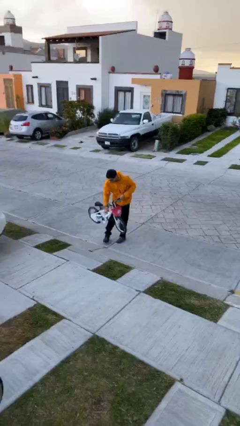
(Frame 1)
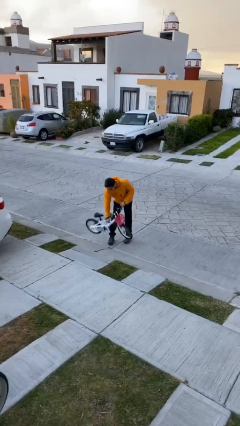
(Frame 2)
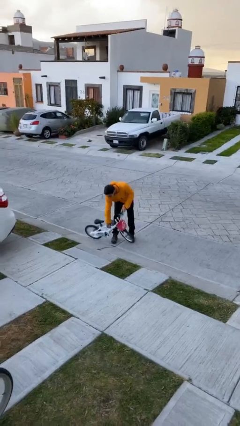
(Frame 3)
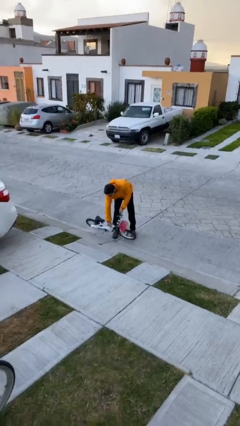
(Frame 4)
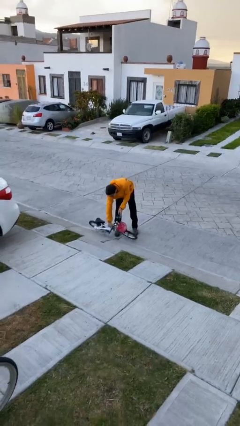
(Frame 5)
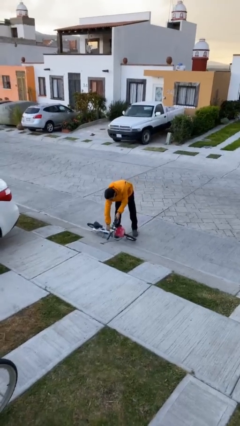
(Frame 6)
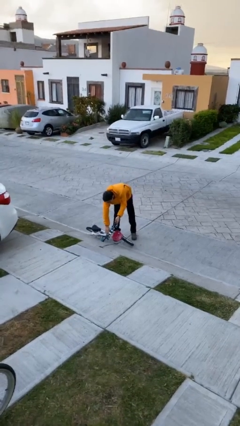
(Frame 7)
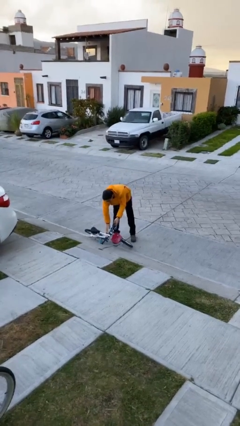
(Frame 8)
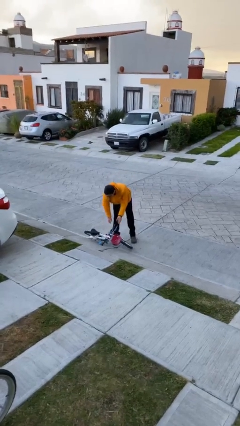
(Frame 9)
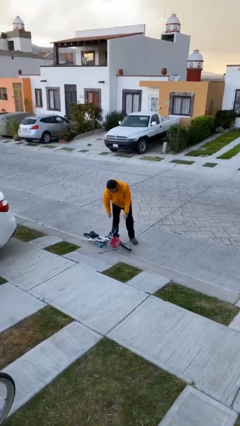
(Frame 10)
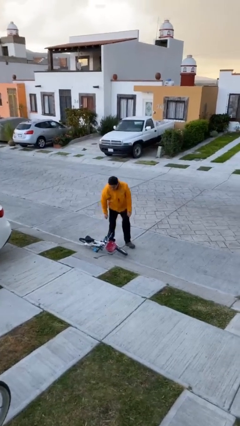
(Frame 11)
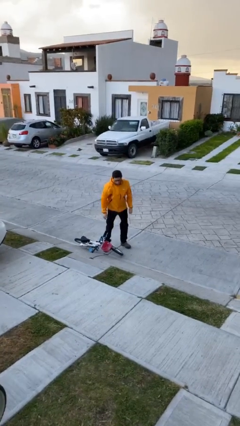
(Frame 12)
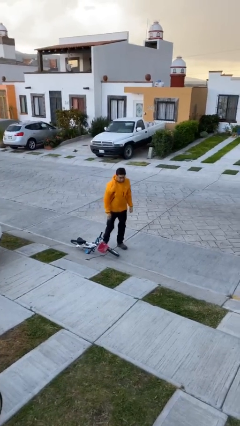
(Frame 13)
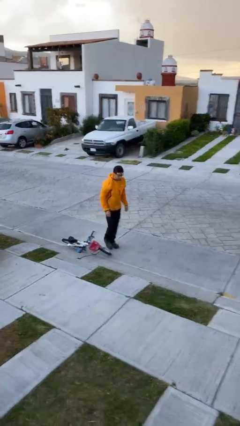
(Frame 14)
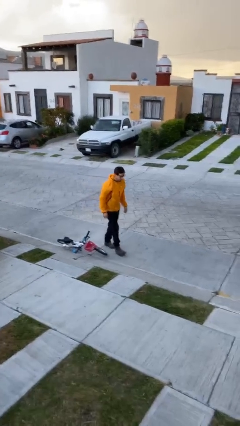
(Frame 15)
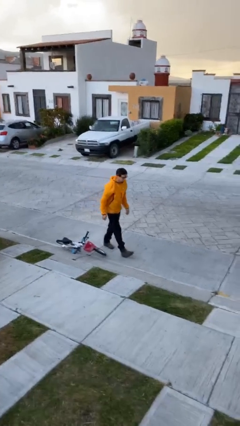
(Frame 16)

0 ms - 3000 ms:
person puts down object on floor

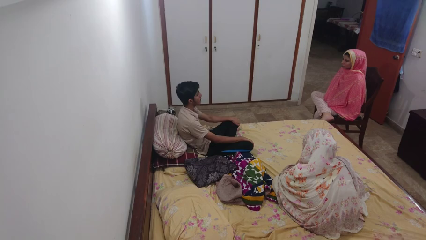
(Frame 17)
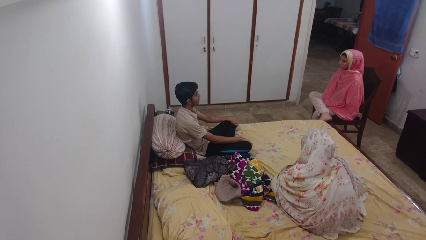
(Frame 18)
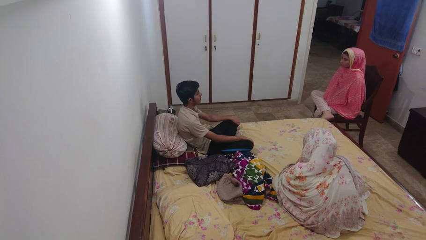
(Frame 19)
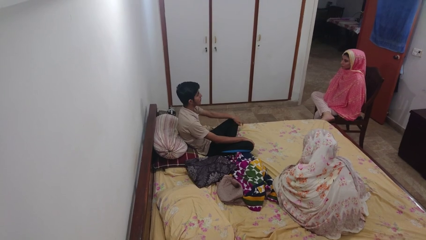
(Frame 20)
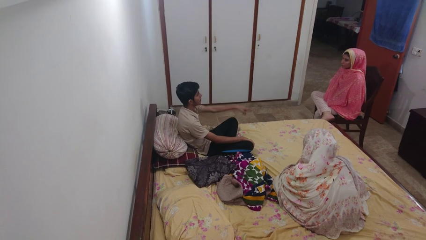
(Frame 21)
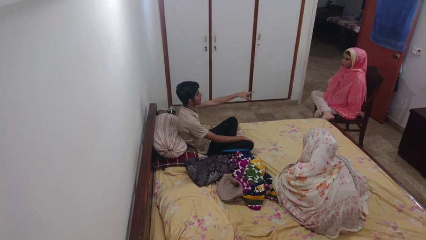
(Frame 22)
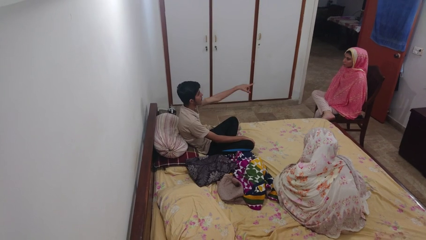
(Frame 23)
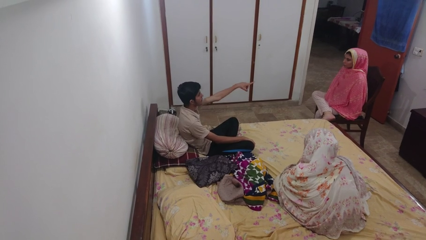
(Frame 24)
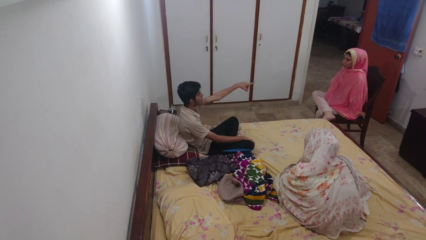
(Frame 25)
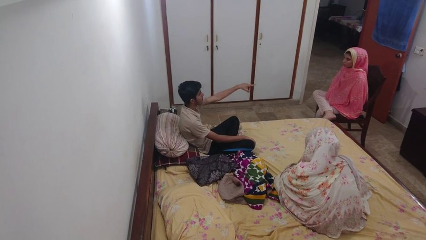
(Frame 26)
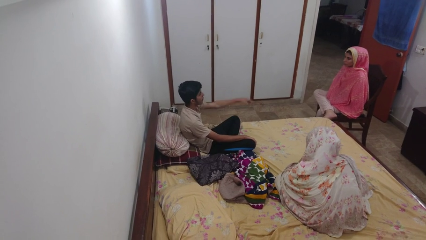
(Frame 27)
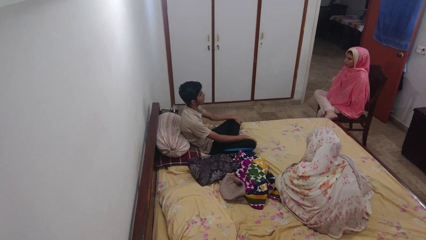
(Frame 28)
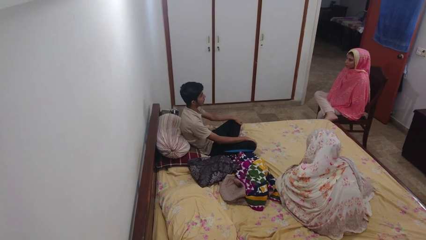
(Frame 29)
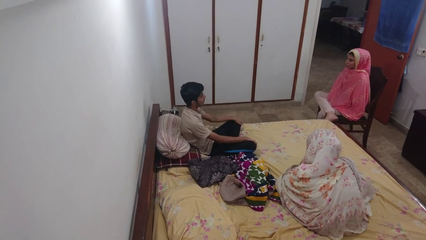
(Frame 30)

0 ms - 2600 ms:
person points at person

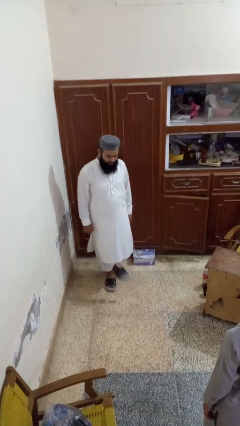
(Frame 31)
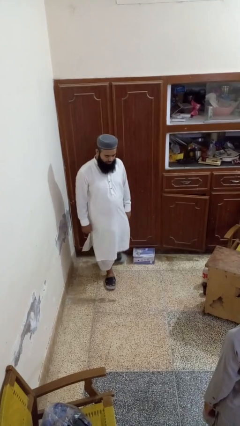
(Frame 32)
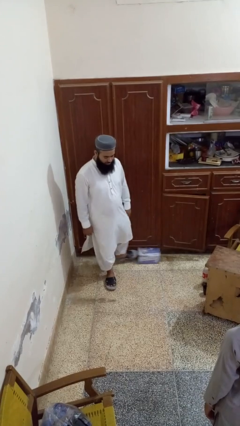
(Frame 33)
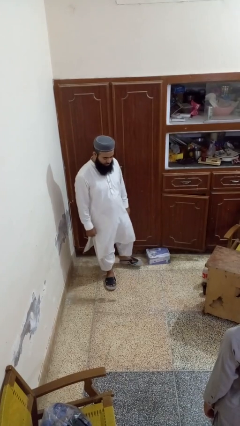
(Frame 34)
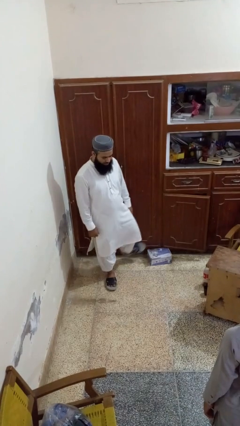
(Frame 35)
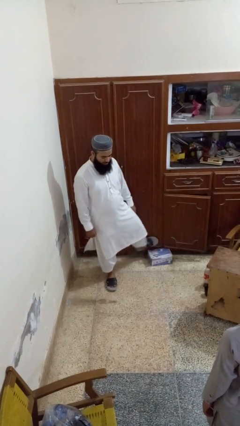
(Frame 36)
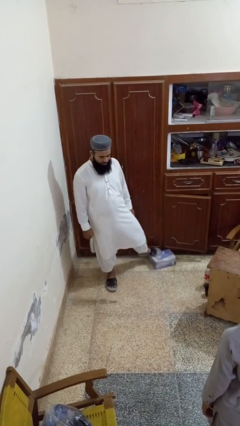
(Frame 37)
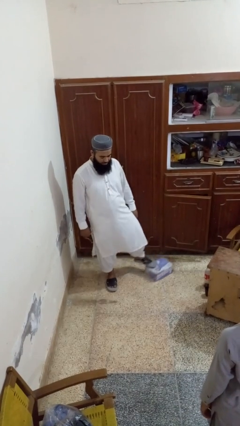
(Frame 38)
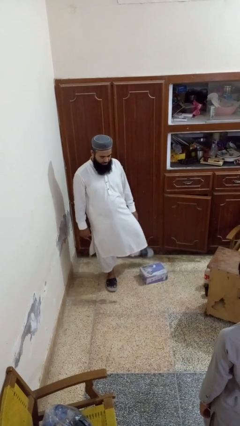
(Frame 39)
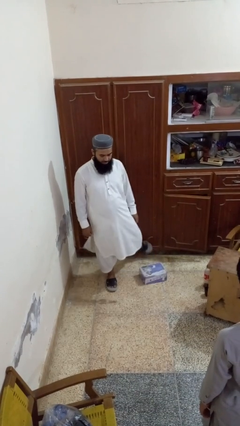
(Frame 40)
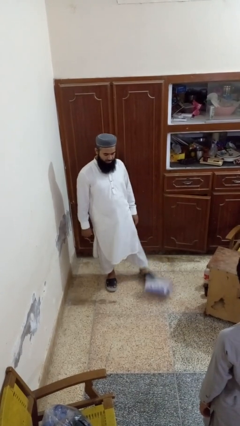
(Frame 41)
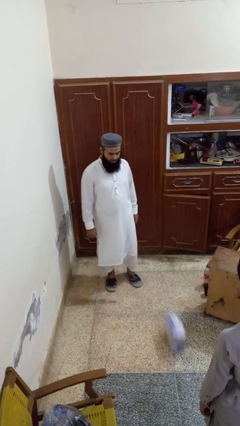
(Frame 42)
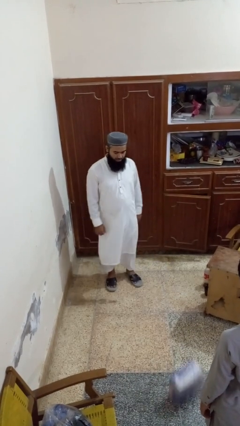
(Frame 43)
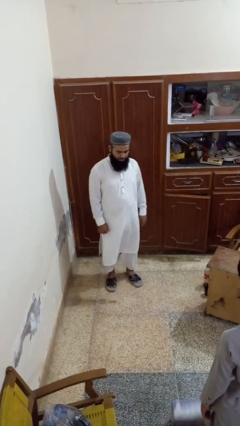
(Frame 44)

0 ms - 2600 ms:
person kicks object to person

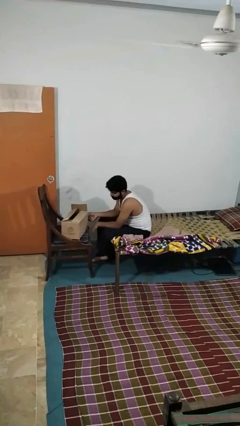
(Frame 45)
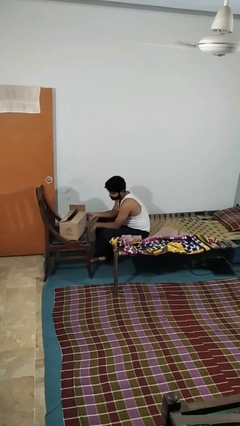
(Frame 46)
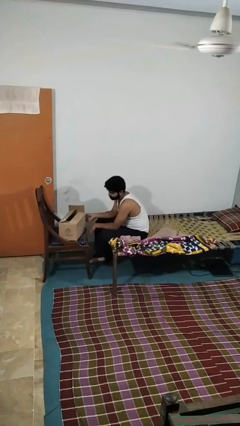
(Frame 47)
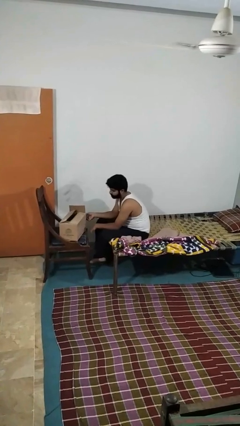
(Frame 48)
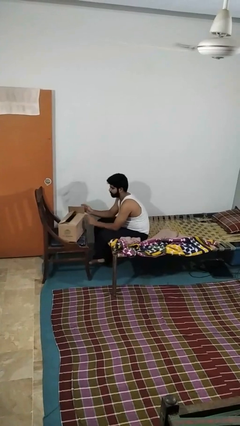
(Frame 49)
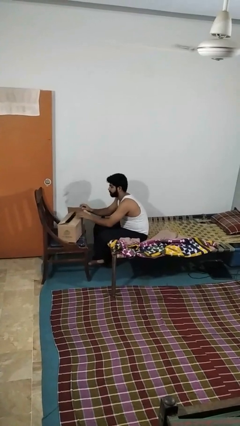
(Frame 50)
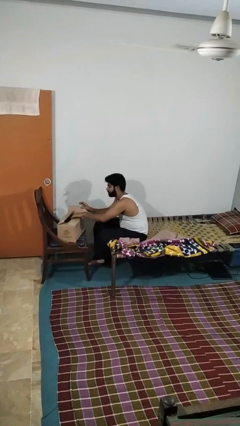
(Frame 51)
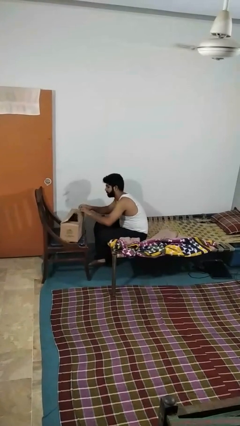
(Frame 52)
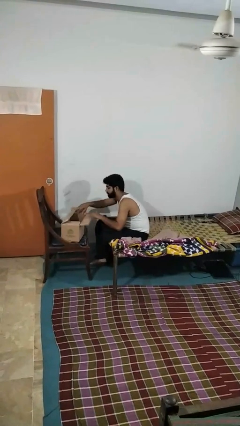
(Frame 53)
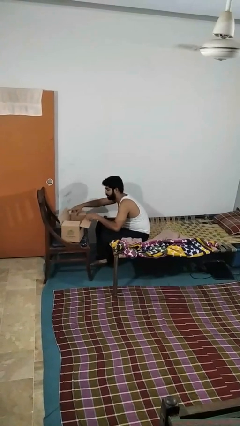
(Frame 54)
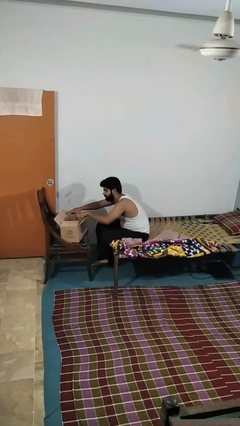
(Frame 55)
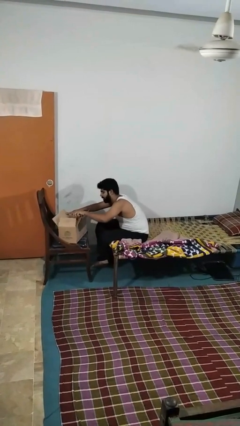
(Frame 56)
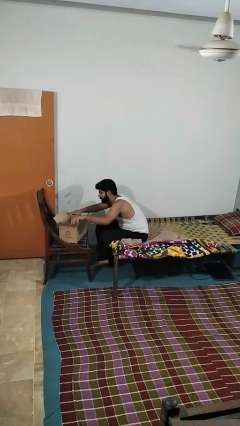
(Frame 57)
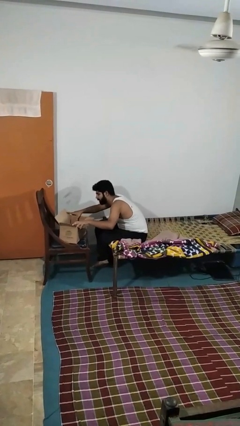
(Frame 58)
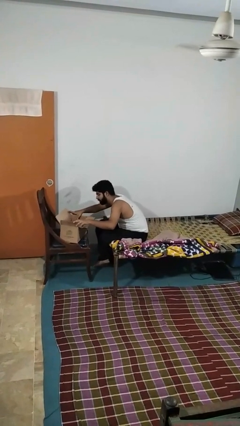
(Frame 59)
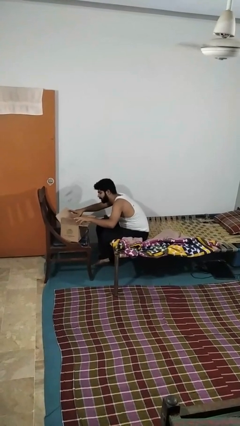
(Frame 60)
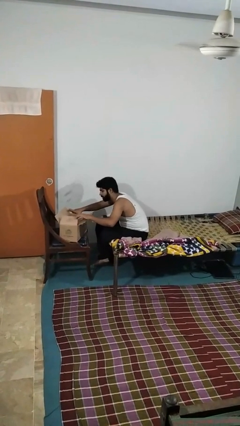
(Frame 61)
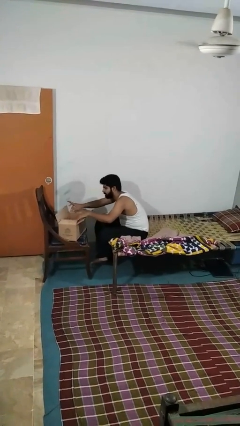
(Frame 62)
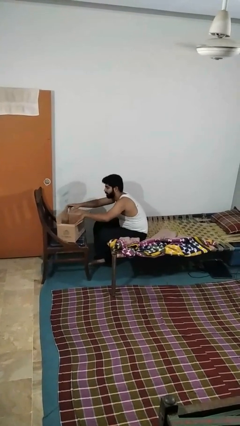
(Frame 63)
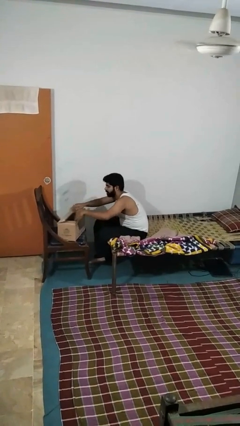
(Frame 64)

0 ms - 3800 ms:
person opens box

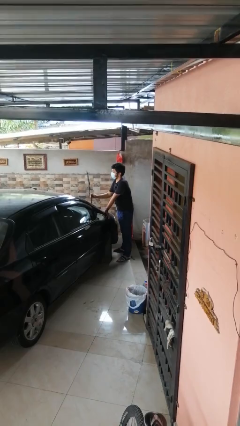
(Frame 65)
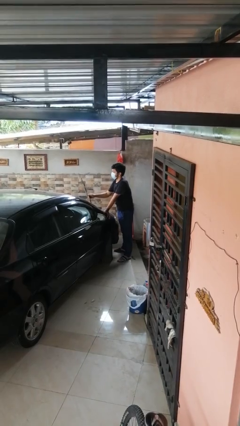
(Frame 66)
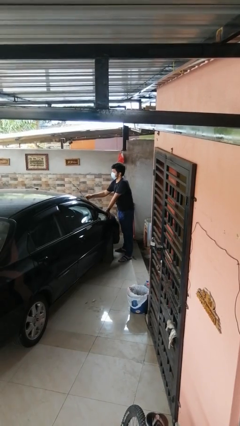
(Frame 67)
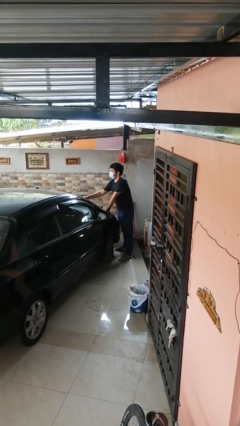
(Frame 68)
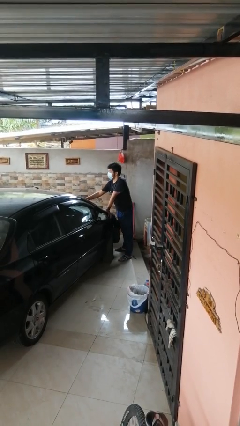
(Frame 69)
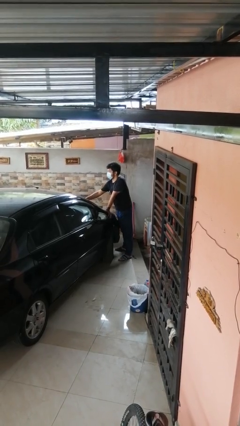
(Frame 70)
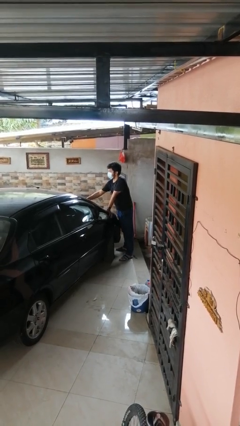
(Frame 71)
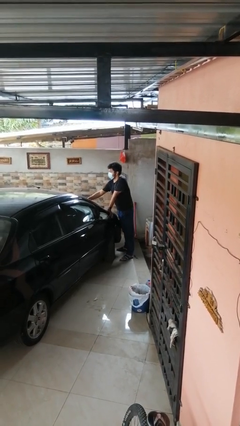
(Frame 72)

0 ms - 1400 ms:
person flips down car wipers

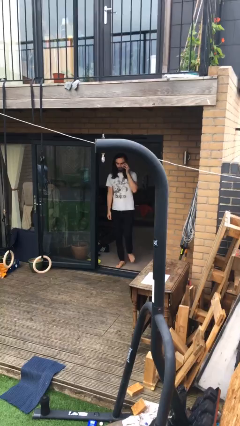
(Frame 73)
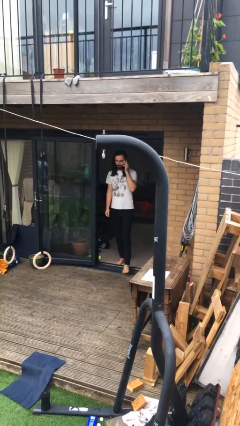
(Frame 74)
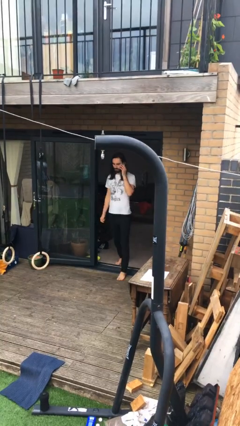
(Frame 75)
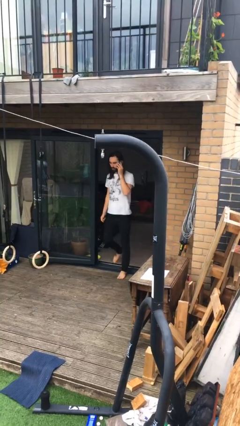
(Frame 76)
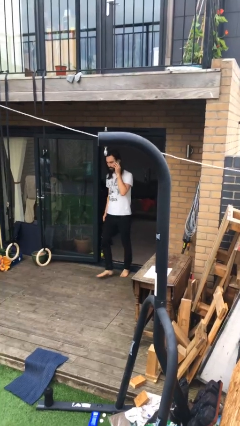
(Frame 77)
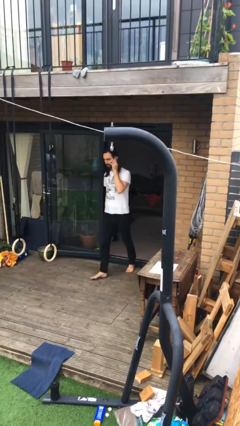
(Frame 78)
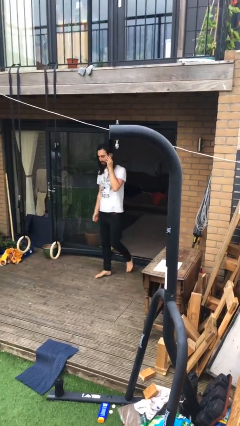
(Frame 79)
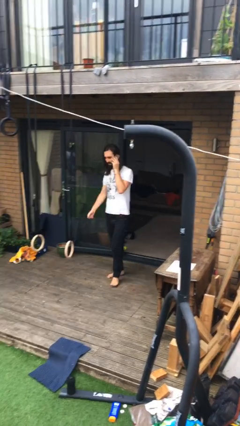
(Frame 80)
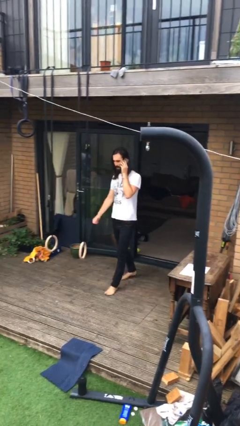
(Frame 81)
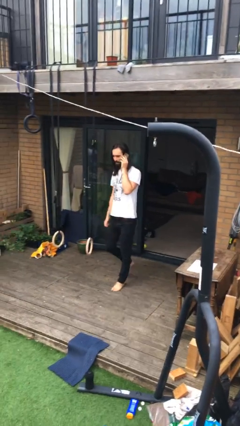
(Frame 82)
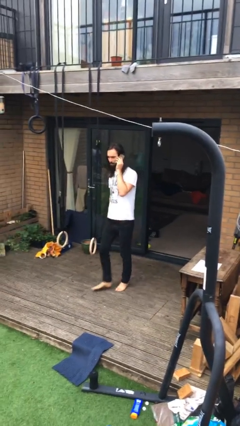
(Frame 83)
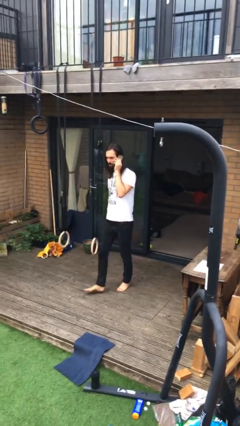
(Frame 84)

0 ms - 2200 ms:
person enters scene through structure

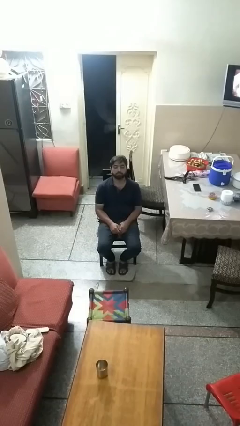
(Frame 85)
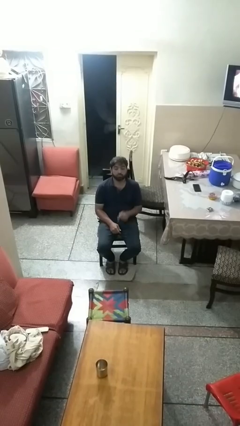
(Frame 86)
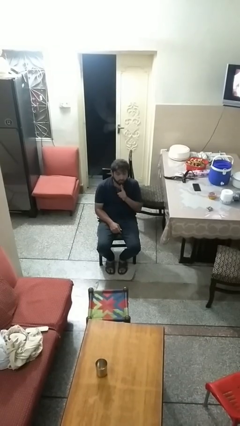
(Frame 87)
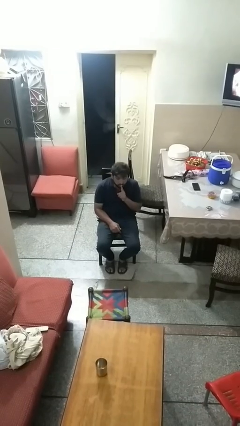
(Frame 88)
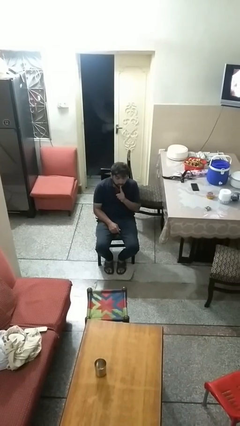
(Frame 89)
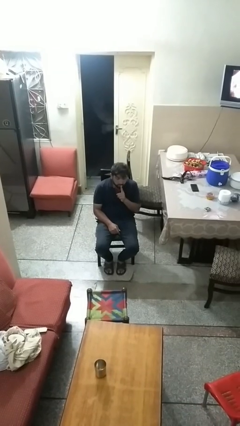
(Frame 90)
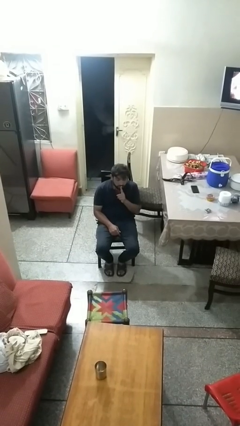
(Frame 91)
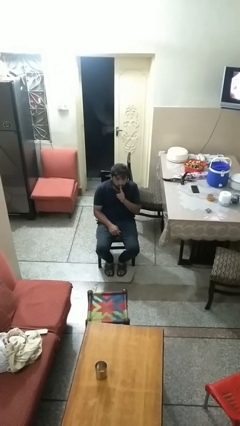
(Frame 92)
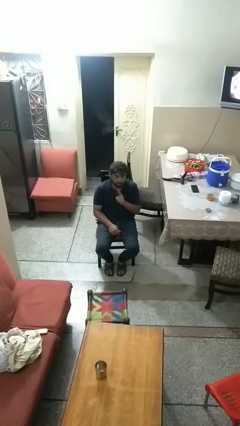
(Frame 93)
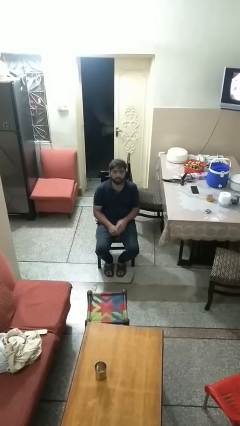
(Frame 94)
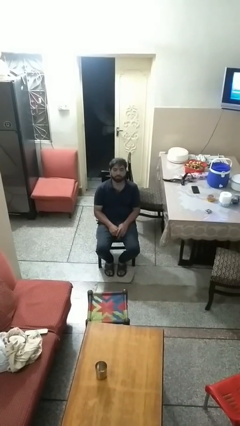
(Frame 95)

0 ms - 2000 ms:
person gestures be quiet
